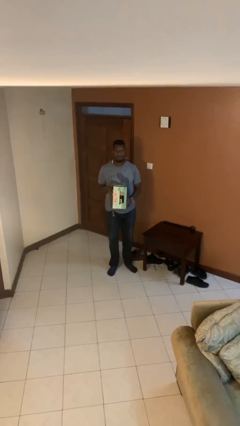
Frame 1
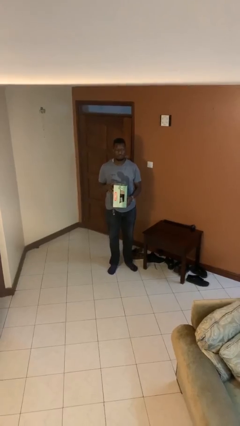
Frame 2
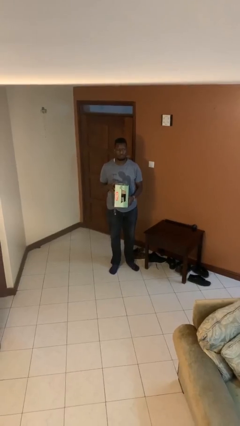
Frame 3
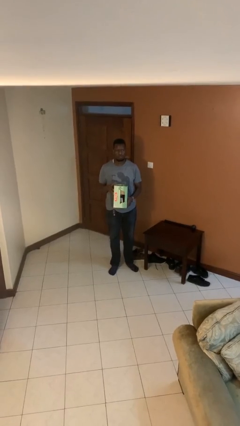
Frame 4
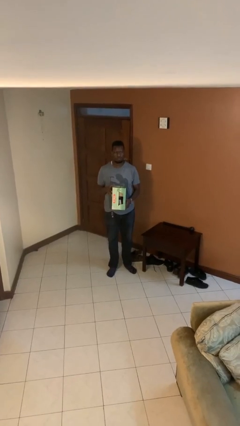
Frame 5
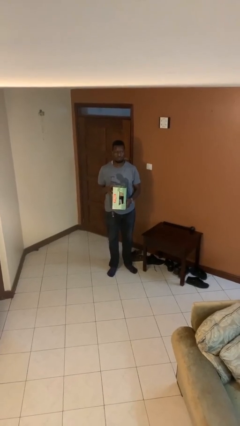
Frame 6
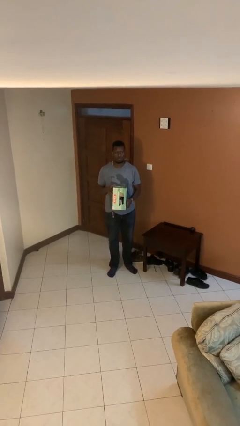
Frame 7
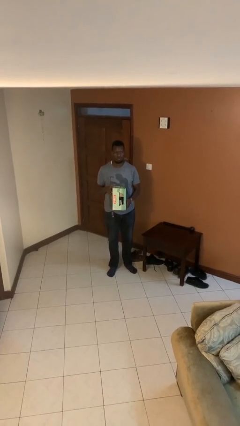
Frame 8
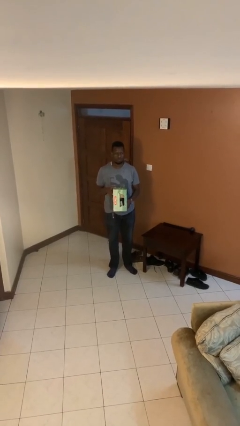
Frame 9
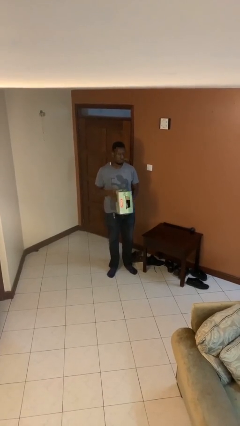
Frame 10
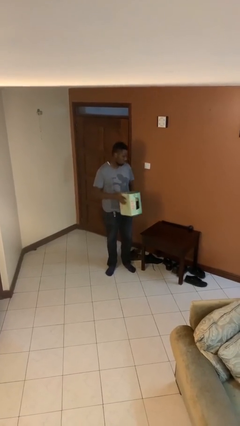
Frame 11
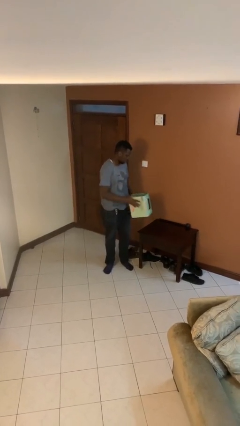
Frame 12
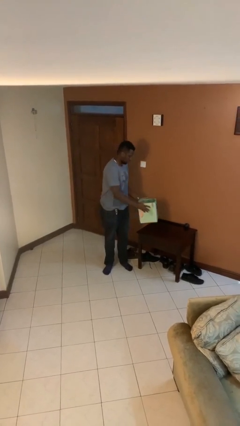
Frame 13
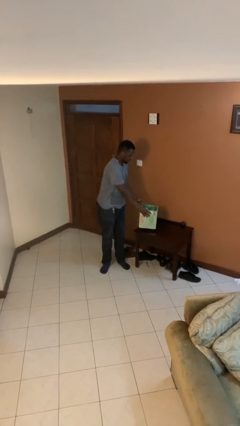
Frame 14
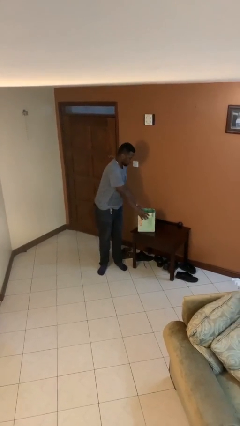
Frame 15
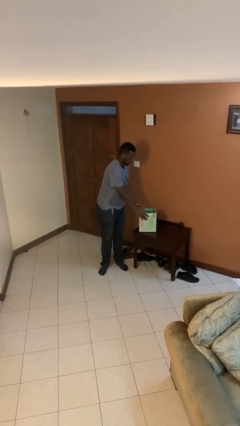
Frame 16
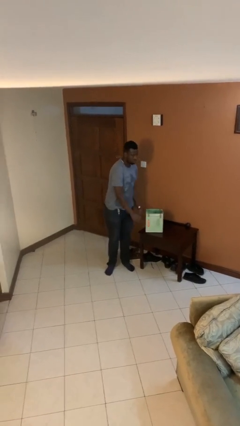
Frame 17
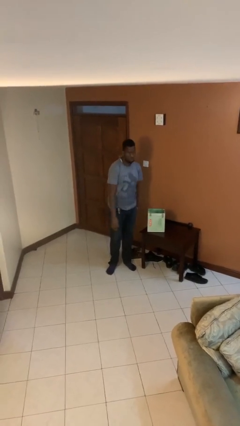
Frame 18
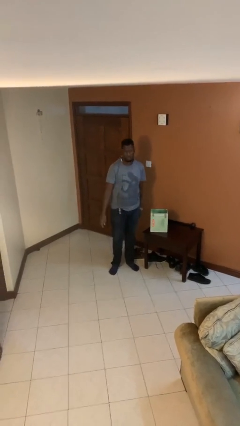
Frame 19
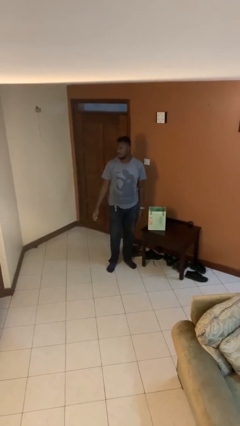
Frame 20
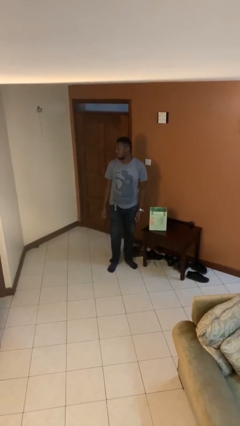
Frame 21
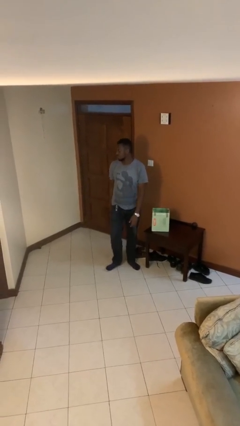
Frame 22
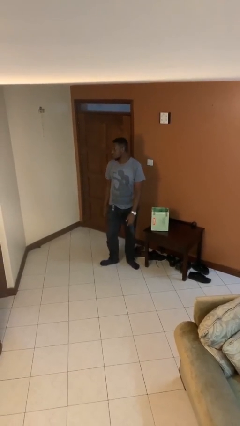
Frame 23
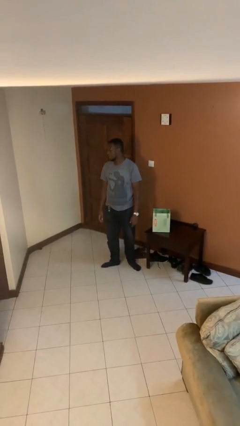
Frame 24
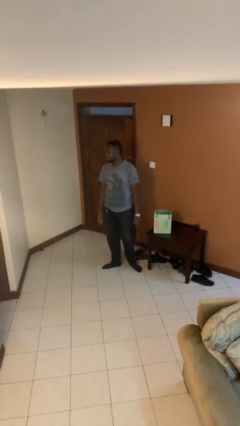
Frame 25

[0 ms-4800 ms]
person puts down object on table

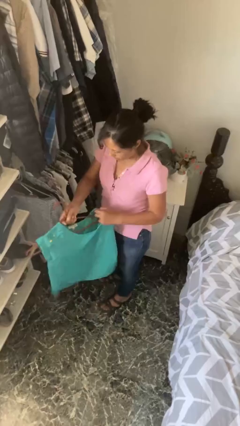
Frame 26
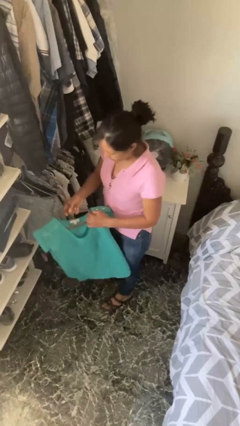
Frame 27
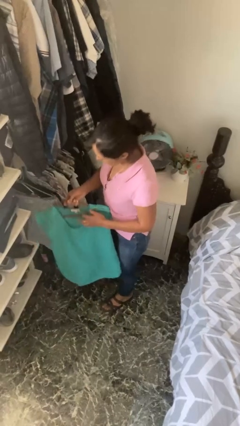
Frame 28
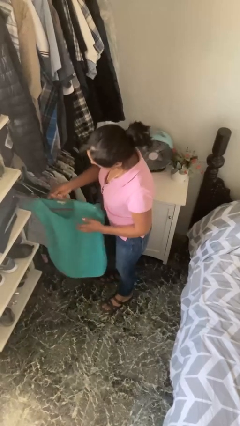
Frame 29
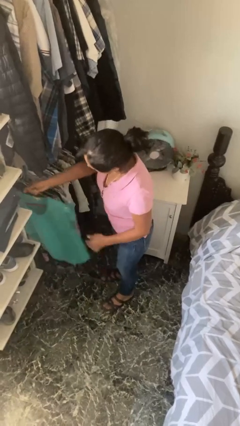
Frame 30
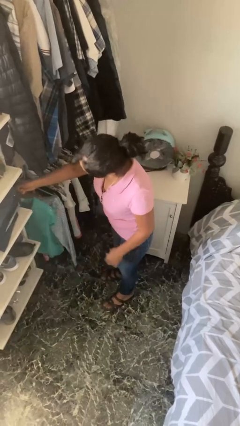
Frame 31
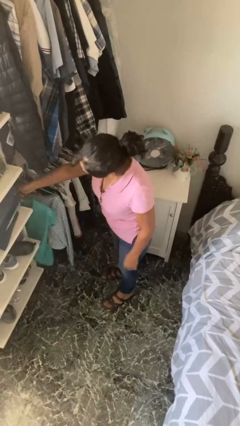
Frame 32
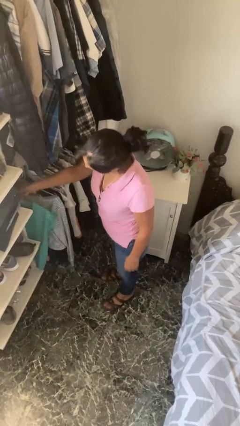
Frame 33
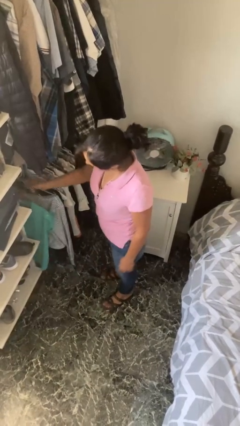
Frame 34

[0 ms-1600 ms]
person puts clothes into closet

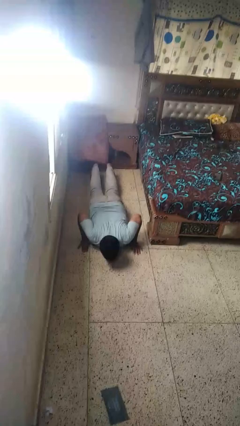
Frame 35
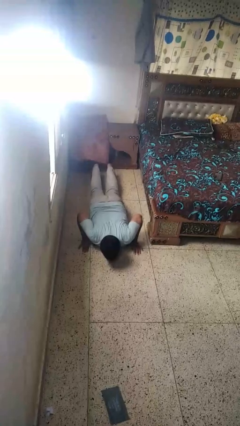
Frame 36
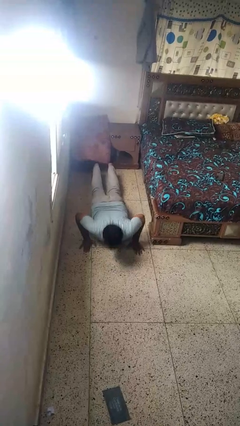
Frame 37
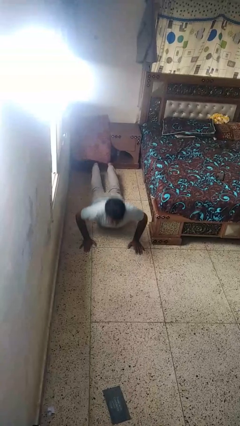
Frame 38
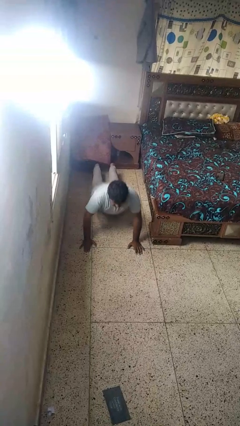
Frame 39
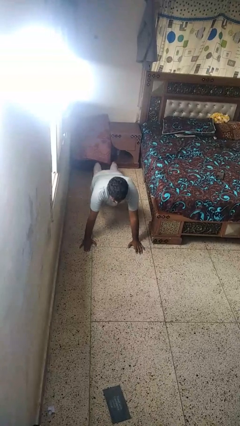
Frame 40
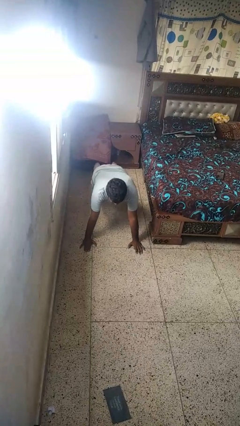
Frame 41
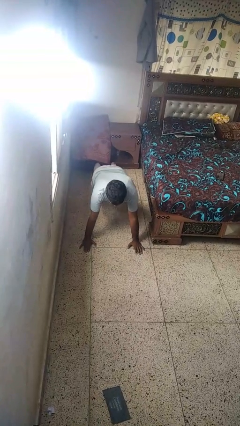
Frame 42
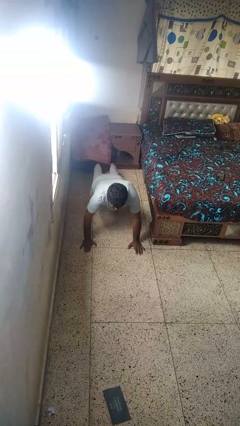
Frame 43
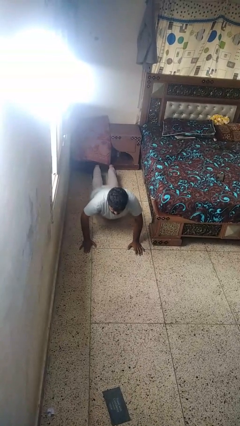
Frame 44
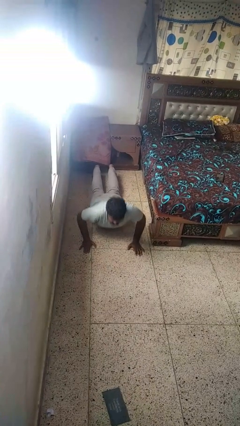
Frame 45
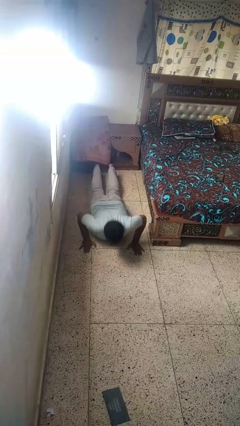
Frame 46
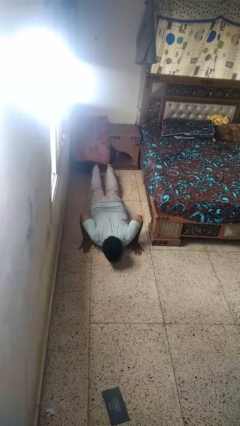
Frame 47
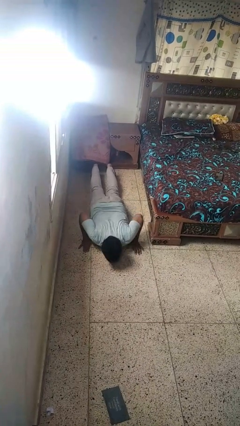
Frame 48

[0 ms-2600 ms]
person exercises with pushup

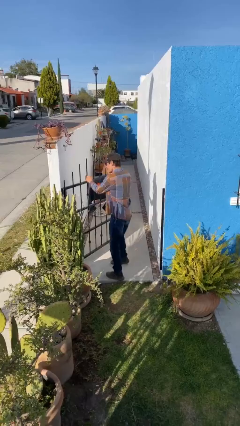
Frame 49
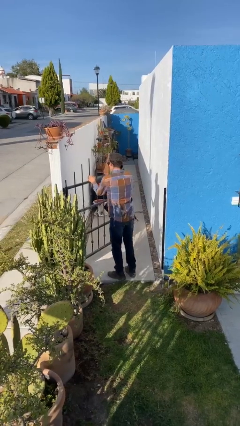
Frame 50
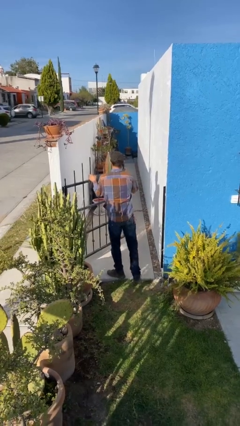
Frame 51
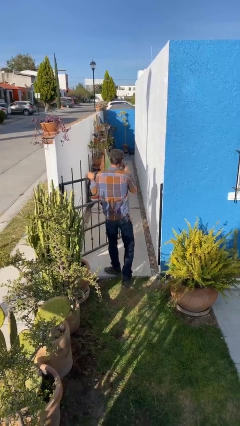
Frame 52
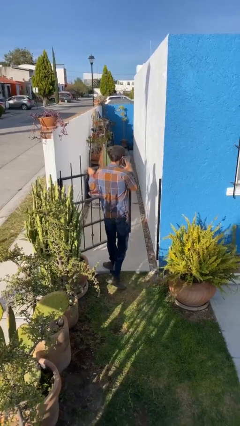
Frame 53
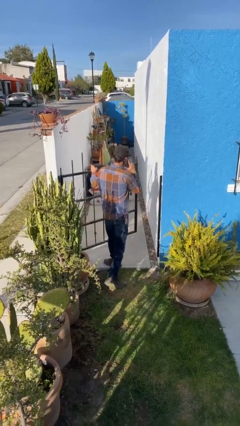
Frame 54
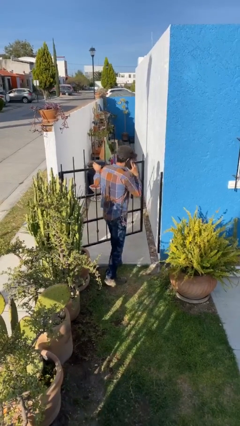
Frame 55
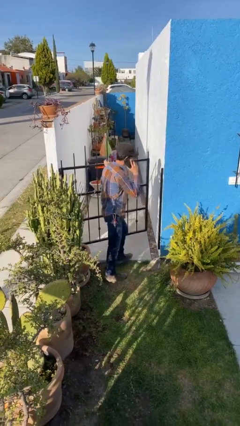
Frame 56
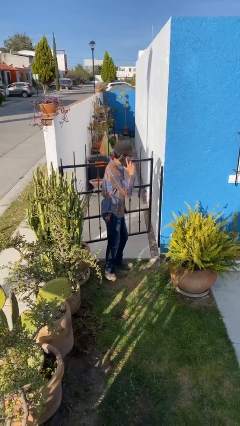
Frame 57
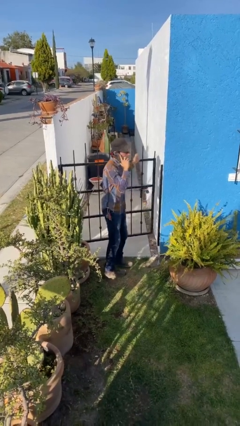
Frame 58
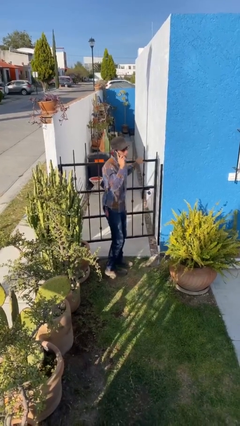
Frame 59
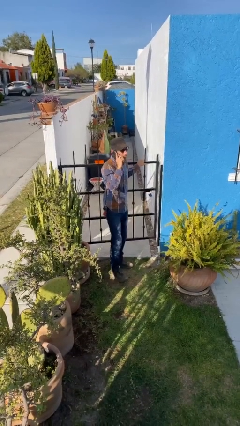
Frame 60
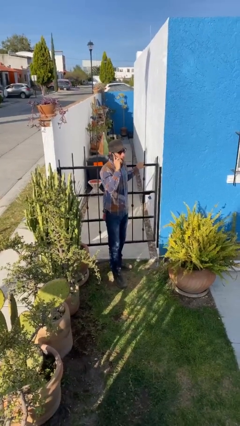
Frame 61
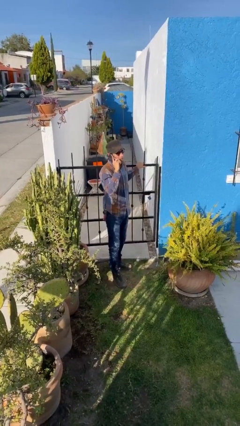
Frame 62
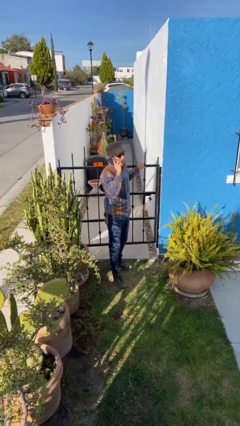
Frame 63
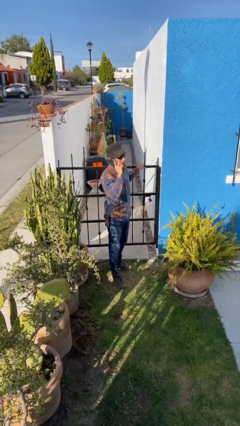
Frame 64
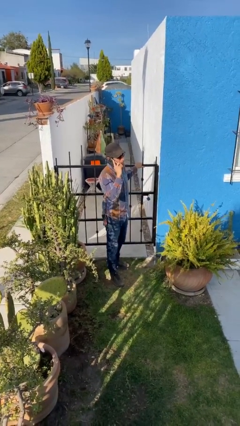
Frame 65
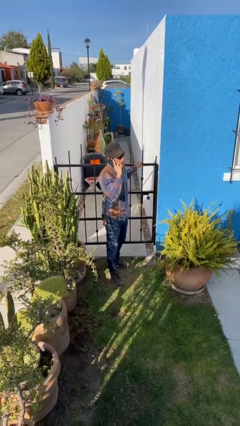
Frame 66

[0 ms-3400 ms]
person closes facility door

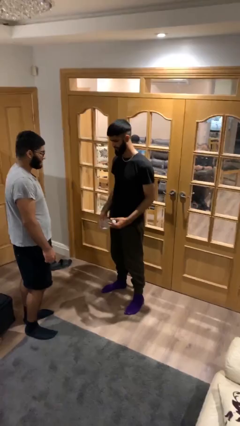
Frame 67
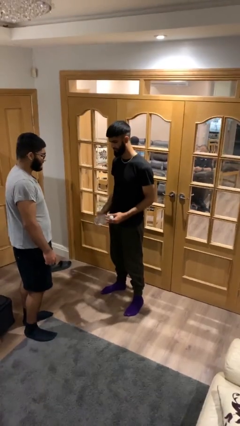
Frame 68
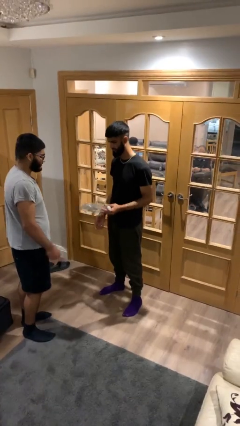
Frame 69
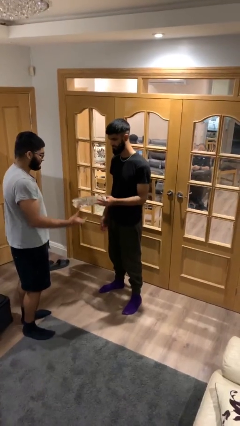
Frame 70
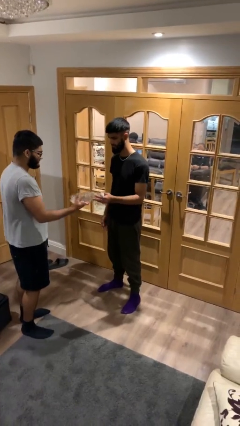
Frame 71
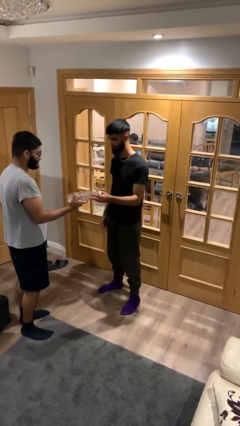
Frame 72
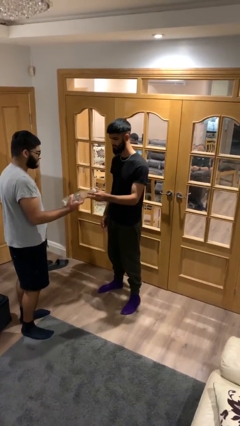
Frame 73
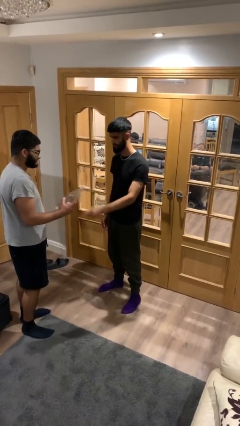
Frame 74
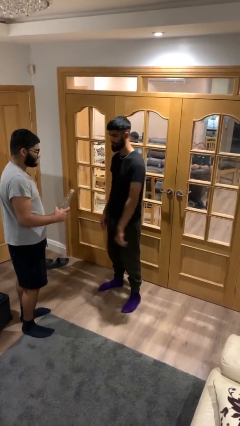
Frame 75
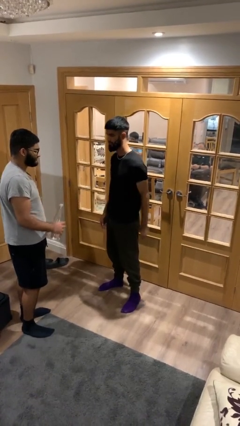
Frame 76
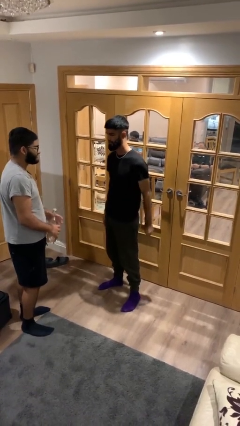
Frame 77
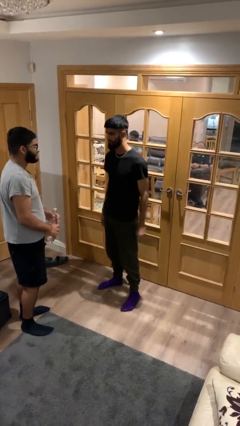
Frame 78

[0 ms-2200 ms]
person transfers object to person

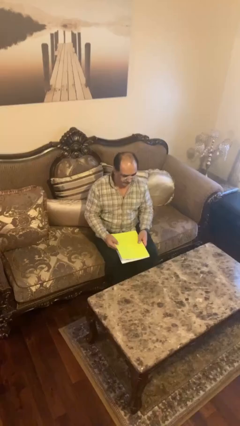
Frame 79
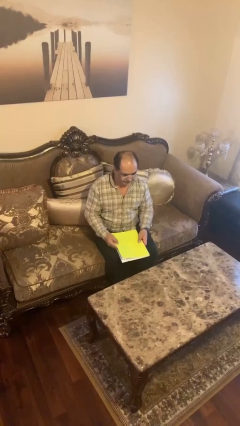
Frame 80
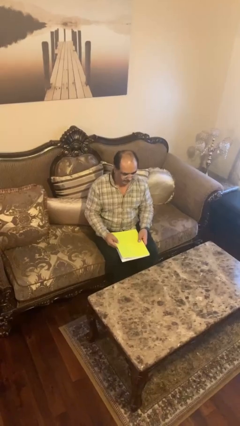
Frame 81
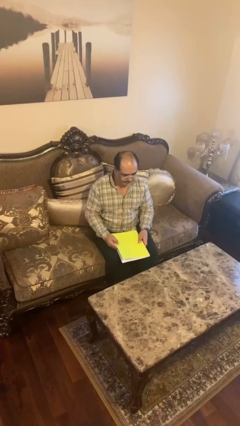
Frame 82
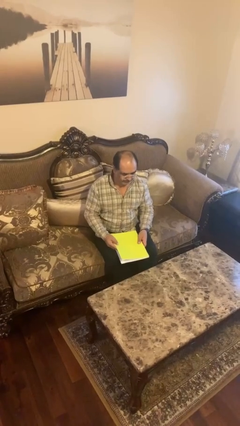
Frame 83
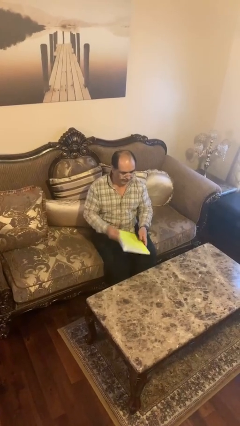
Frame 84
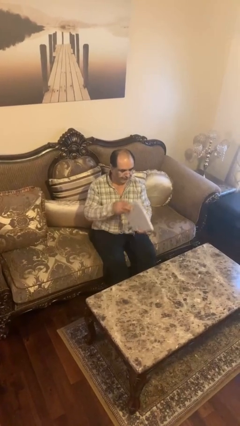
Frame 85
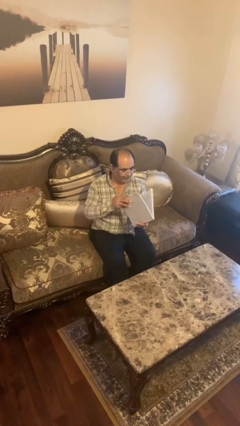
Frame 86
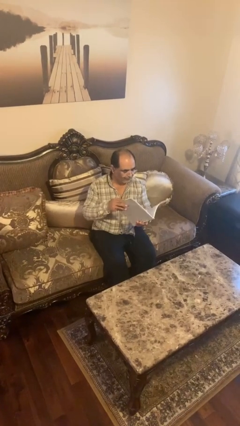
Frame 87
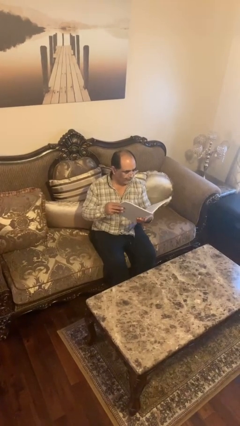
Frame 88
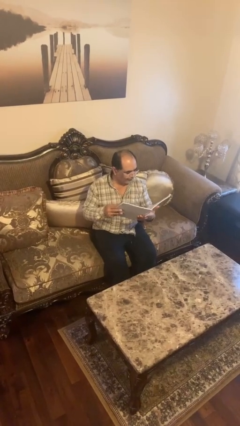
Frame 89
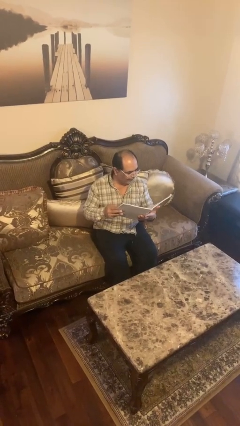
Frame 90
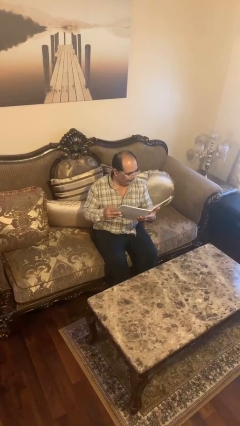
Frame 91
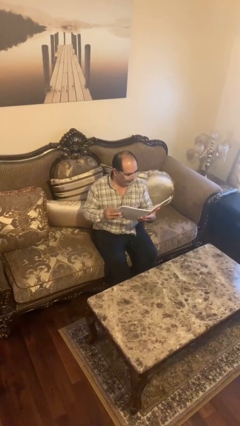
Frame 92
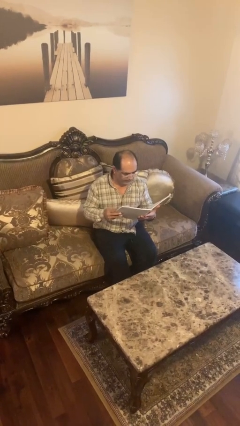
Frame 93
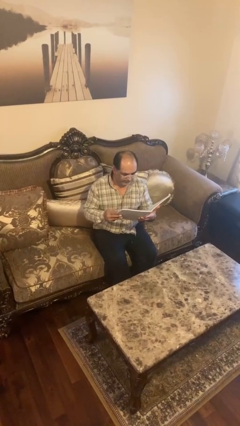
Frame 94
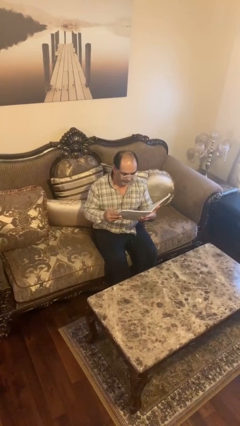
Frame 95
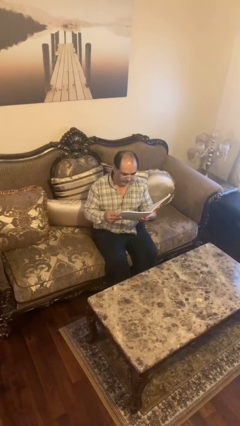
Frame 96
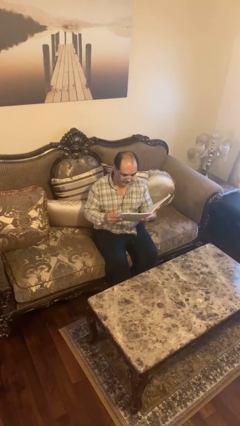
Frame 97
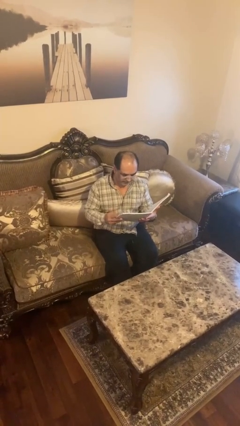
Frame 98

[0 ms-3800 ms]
person reads document
